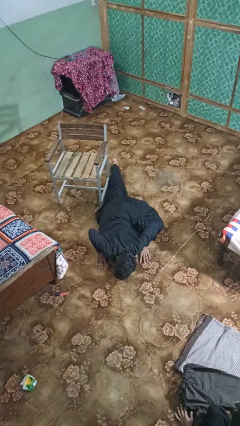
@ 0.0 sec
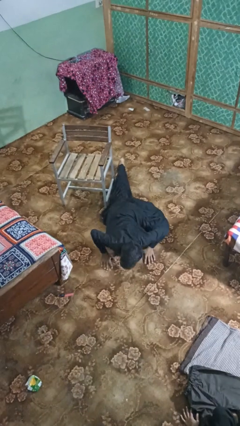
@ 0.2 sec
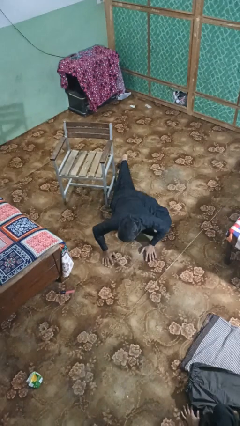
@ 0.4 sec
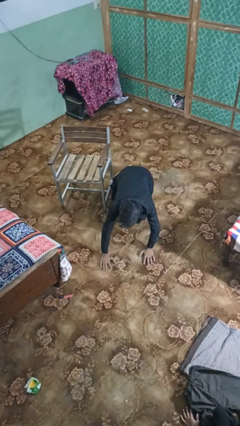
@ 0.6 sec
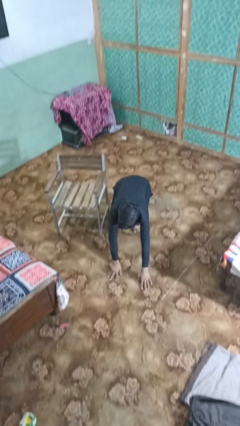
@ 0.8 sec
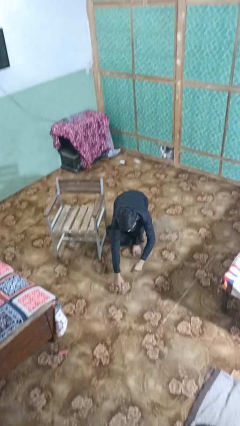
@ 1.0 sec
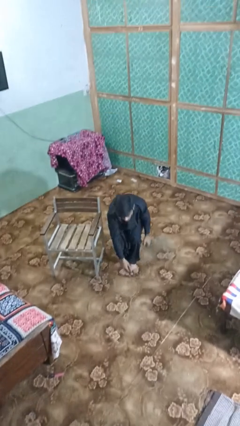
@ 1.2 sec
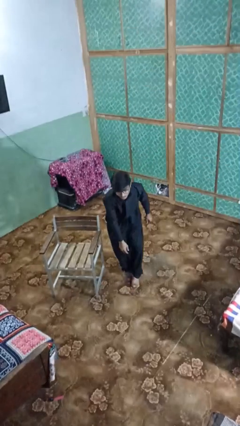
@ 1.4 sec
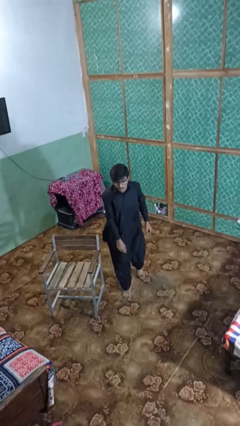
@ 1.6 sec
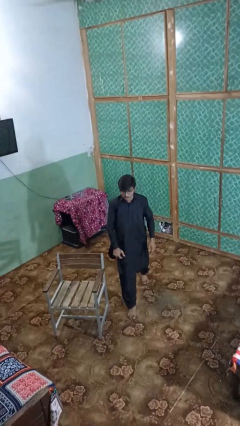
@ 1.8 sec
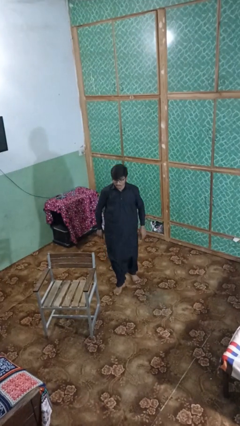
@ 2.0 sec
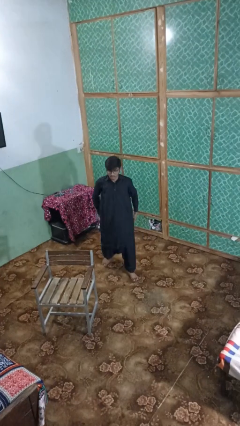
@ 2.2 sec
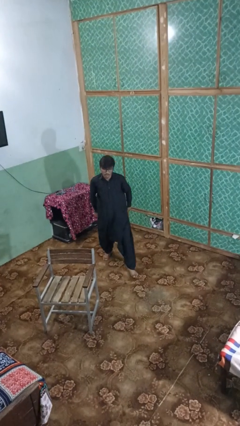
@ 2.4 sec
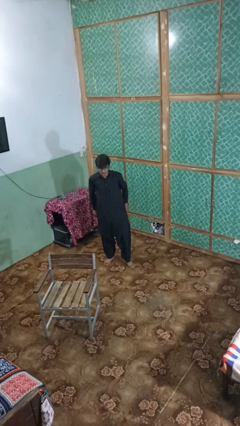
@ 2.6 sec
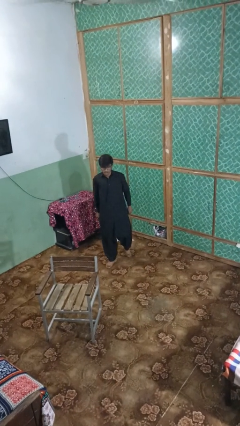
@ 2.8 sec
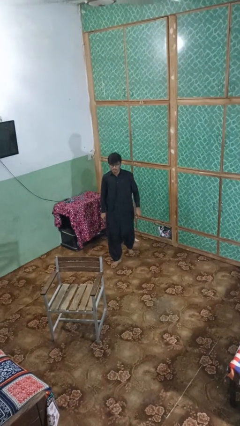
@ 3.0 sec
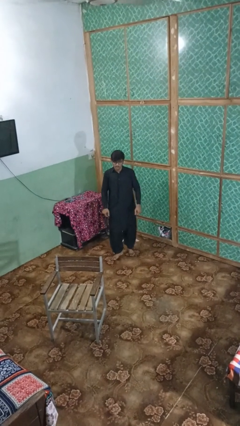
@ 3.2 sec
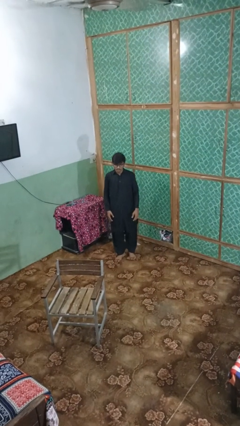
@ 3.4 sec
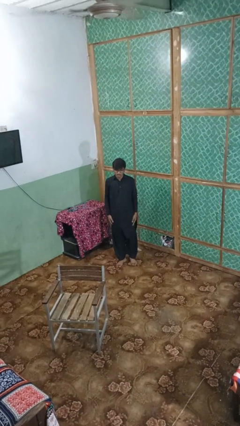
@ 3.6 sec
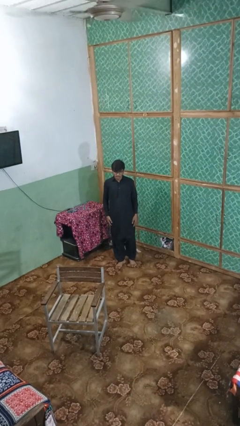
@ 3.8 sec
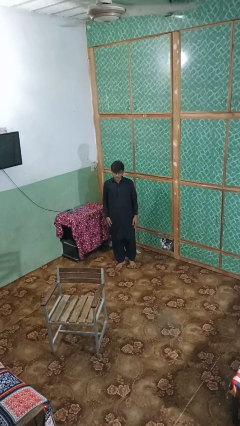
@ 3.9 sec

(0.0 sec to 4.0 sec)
person stands up from floor

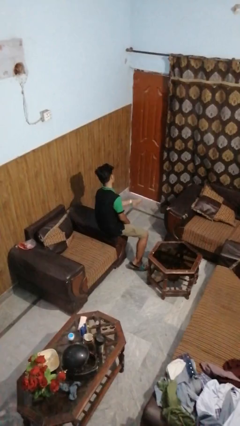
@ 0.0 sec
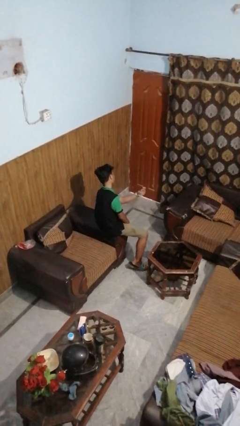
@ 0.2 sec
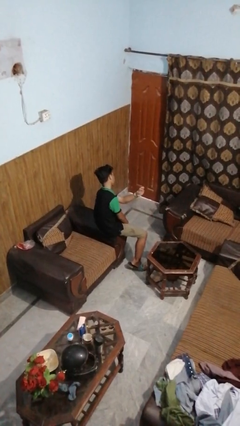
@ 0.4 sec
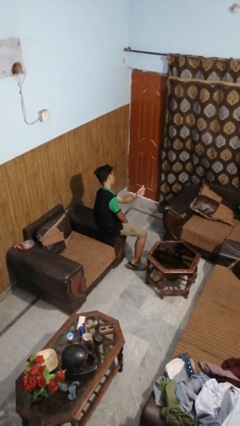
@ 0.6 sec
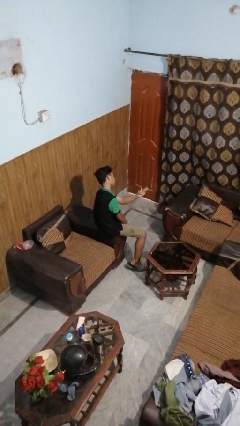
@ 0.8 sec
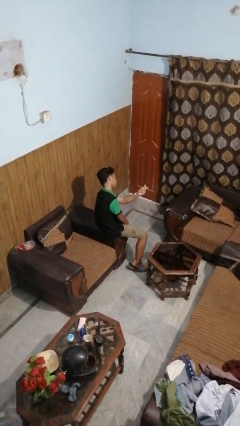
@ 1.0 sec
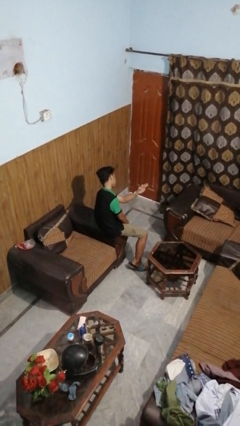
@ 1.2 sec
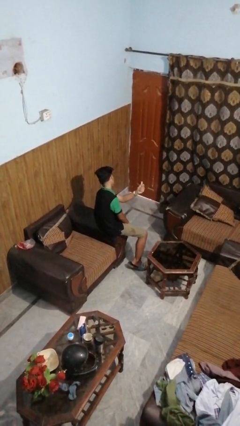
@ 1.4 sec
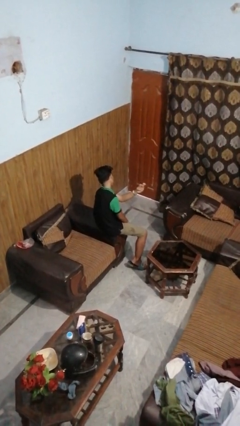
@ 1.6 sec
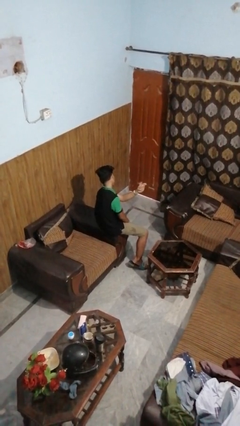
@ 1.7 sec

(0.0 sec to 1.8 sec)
person snaps fingers

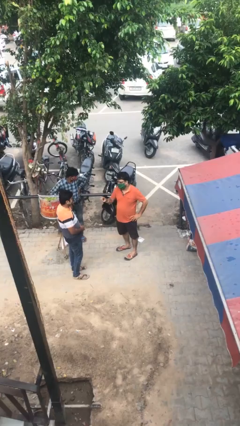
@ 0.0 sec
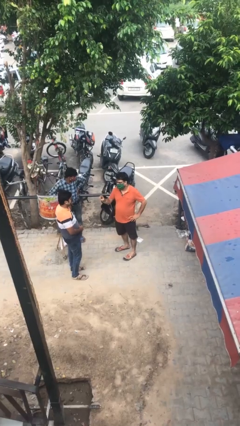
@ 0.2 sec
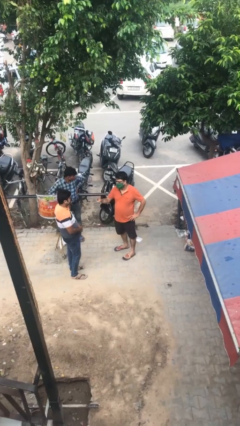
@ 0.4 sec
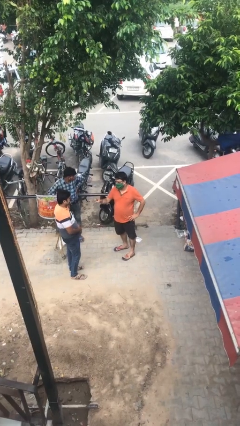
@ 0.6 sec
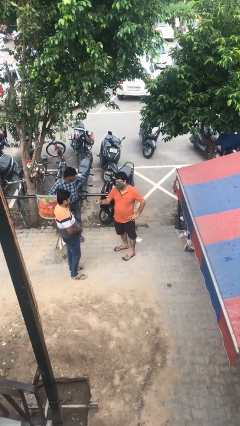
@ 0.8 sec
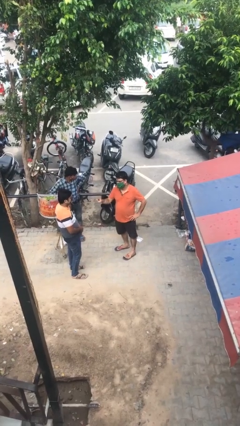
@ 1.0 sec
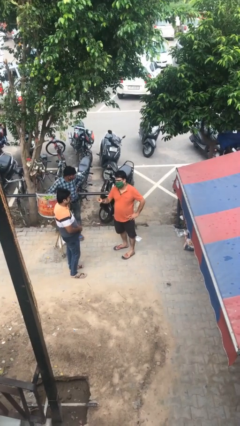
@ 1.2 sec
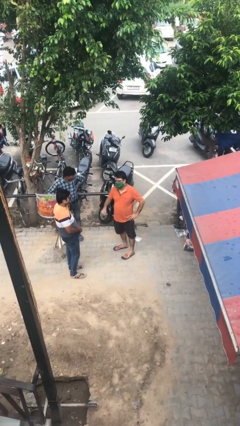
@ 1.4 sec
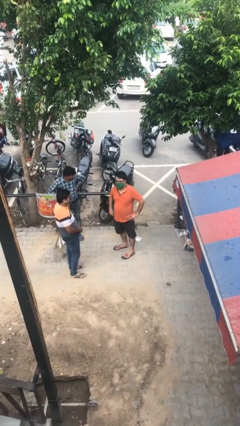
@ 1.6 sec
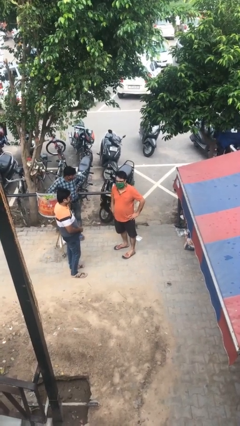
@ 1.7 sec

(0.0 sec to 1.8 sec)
person points at person

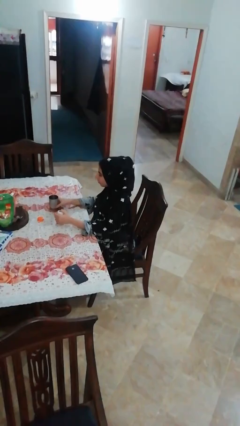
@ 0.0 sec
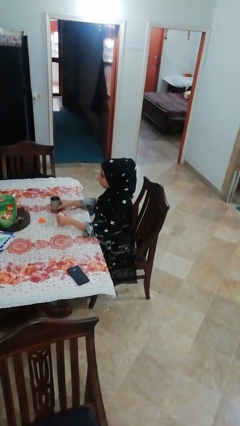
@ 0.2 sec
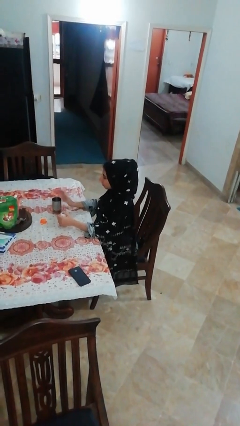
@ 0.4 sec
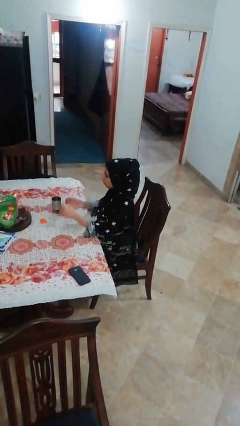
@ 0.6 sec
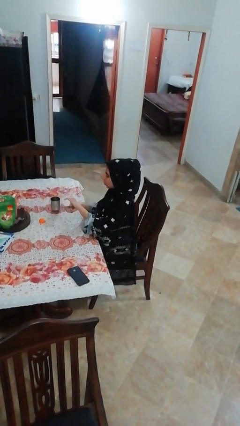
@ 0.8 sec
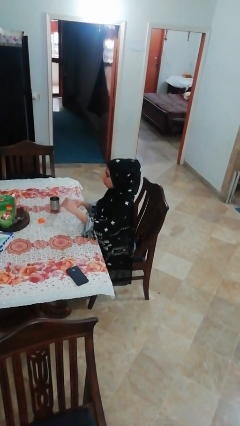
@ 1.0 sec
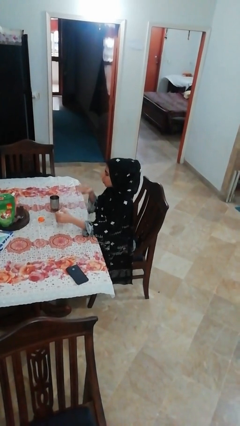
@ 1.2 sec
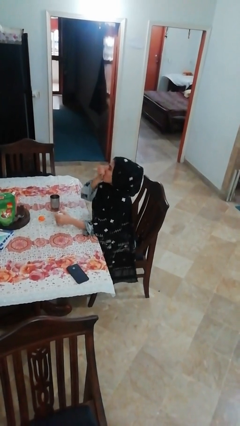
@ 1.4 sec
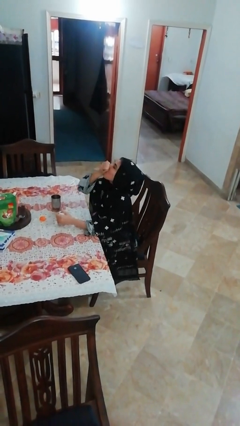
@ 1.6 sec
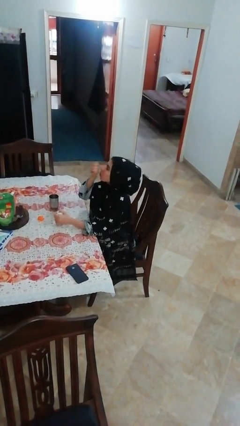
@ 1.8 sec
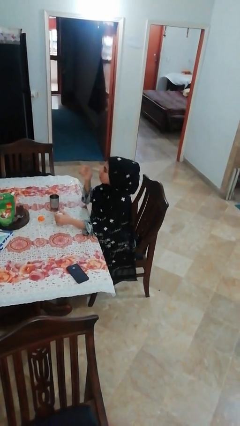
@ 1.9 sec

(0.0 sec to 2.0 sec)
person takes medicine pills

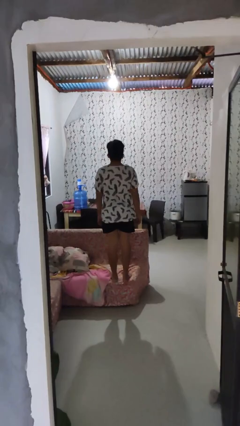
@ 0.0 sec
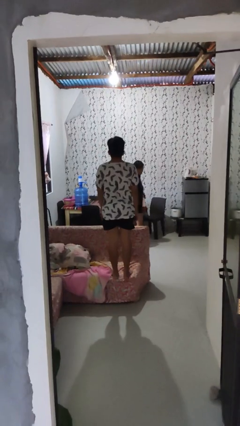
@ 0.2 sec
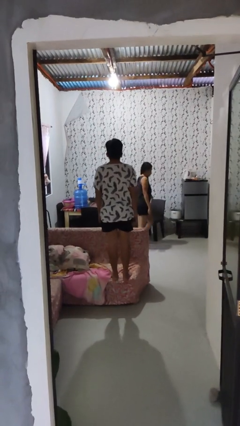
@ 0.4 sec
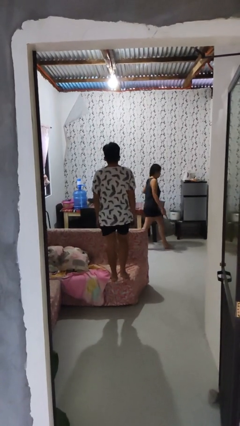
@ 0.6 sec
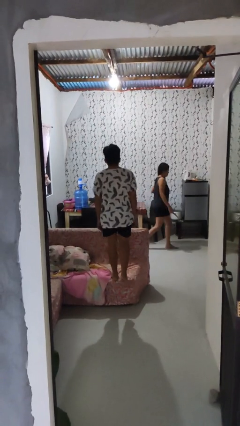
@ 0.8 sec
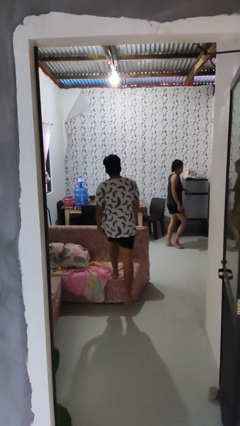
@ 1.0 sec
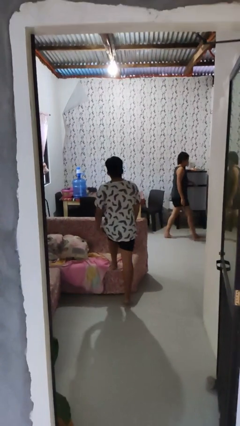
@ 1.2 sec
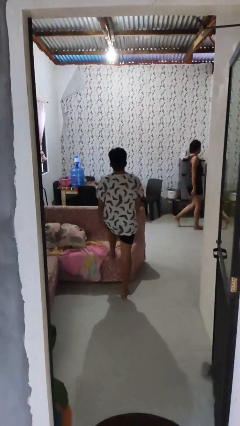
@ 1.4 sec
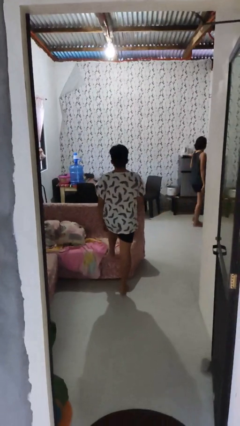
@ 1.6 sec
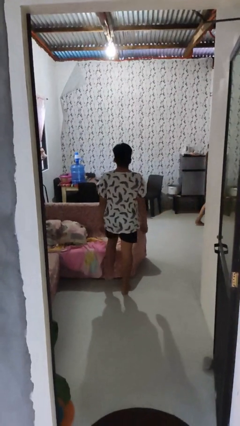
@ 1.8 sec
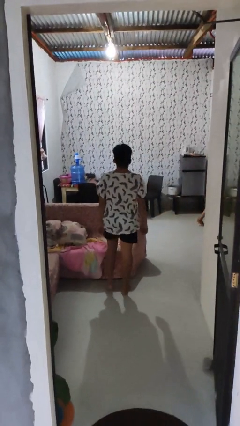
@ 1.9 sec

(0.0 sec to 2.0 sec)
person climbs off couch

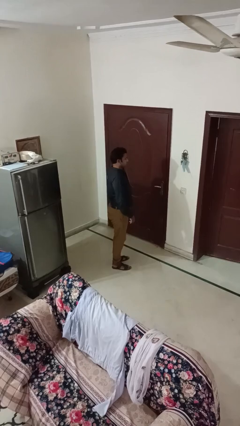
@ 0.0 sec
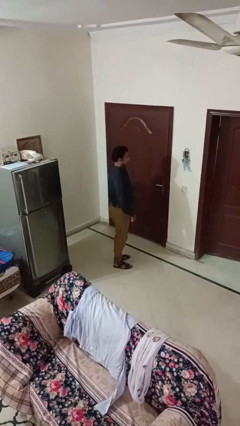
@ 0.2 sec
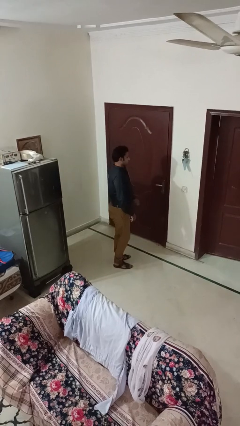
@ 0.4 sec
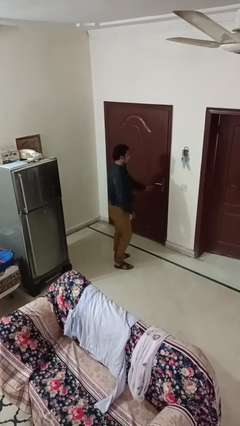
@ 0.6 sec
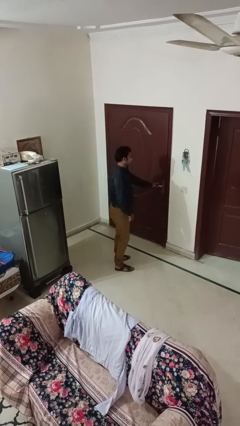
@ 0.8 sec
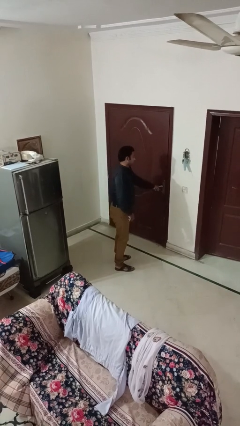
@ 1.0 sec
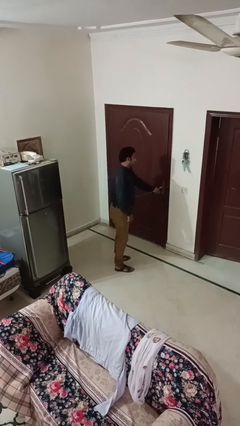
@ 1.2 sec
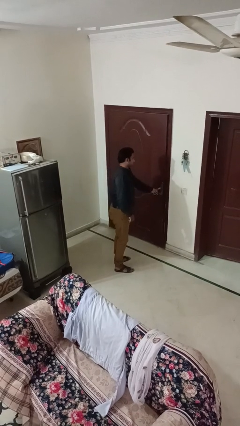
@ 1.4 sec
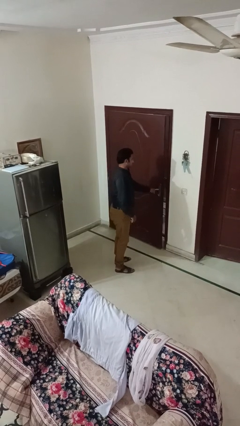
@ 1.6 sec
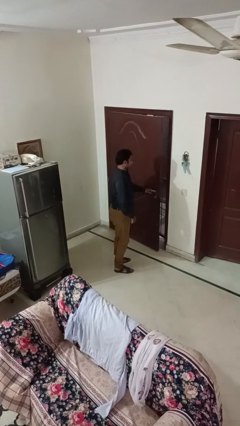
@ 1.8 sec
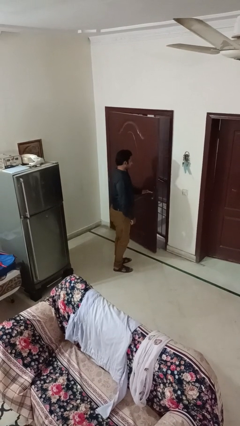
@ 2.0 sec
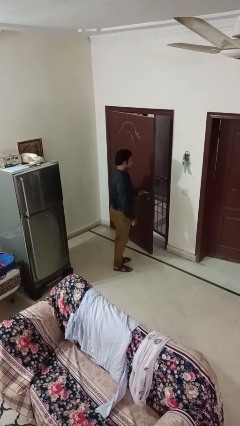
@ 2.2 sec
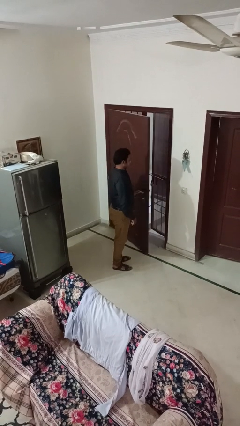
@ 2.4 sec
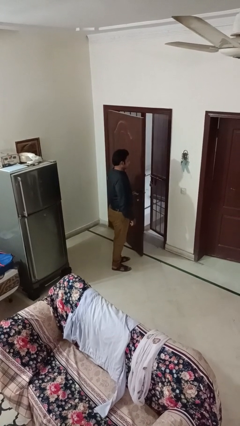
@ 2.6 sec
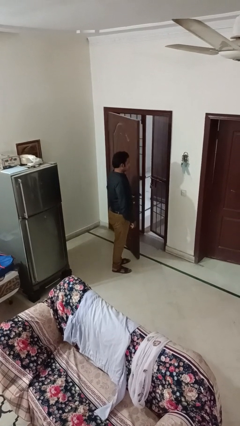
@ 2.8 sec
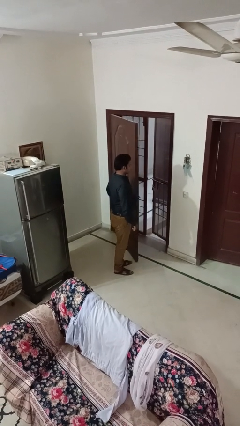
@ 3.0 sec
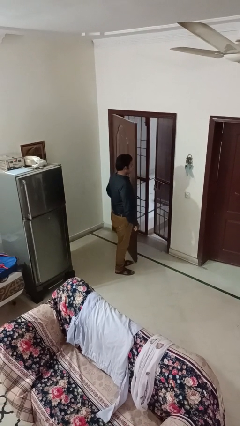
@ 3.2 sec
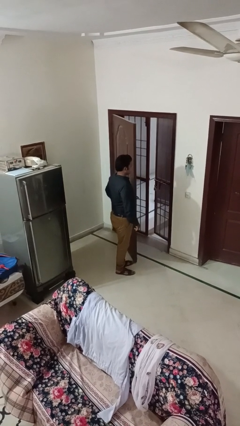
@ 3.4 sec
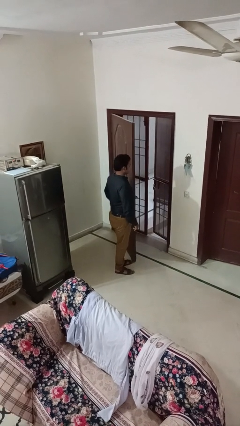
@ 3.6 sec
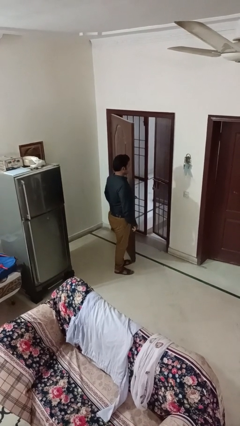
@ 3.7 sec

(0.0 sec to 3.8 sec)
person opens facility door

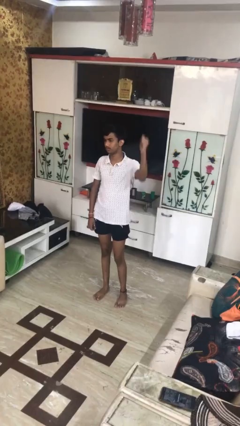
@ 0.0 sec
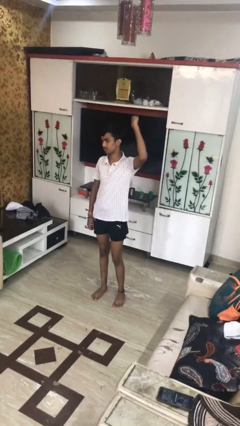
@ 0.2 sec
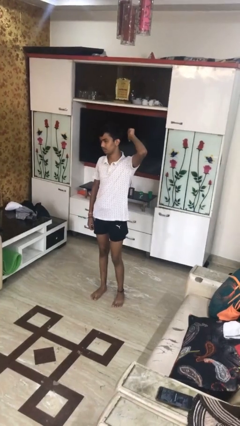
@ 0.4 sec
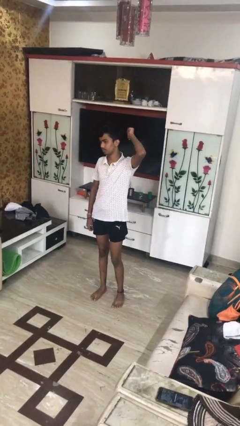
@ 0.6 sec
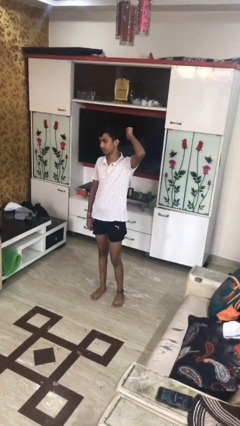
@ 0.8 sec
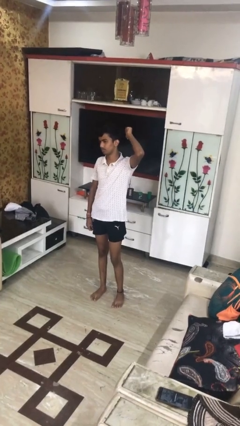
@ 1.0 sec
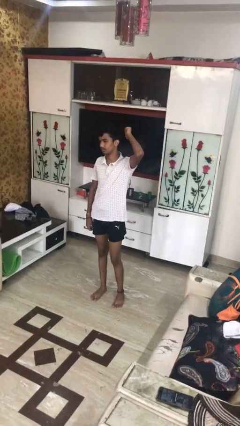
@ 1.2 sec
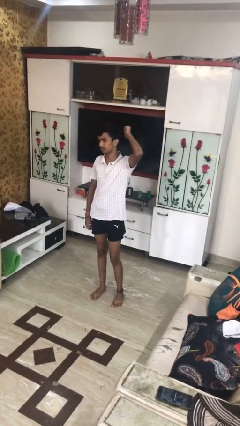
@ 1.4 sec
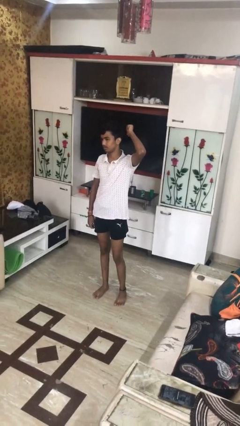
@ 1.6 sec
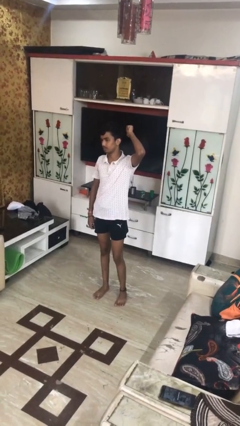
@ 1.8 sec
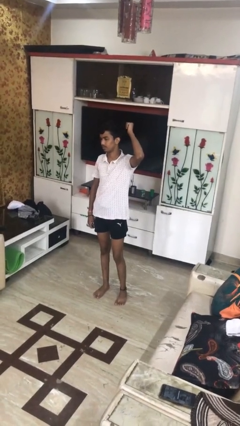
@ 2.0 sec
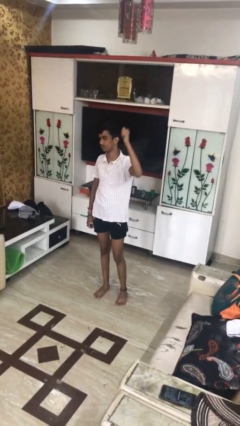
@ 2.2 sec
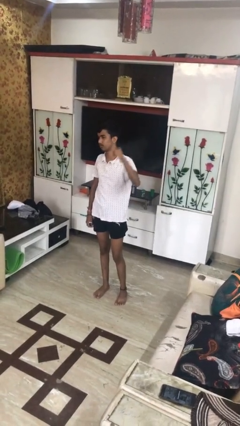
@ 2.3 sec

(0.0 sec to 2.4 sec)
person gestures behind me
